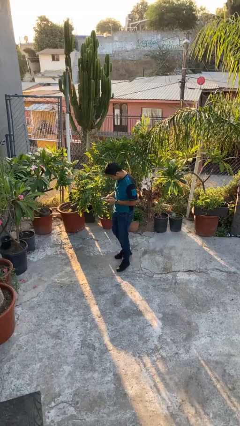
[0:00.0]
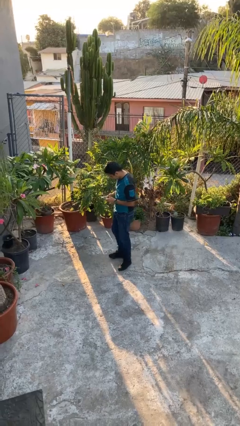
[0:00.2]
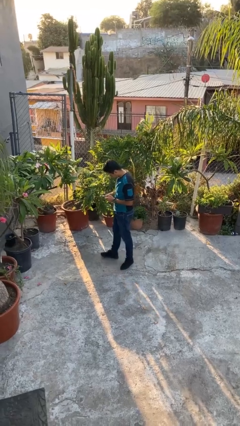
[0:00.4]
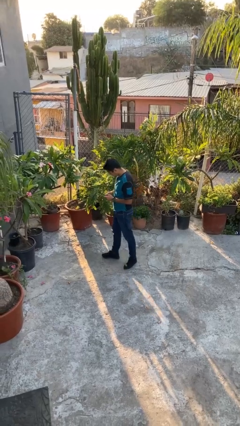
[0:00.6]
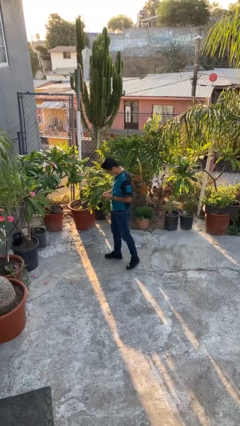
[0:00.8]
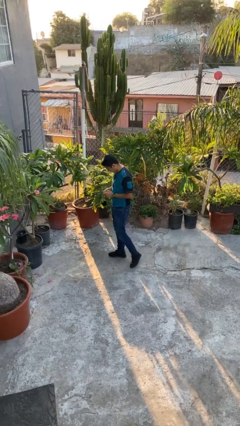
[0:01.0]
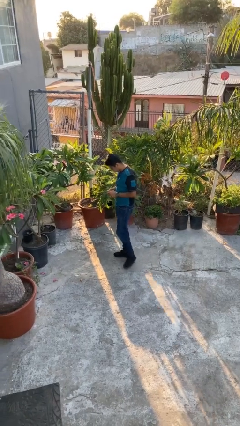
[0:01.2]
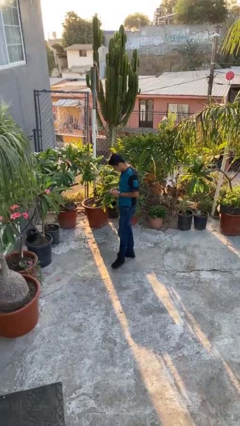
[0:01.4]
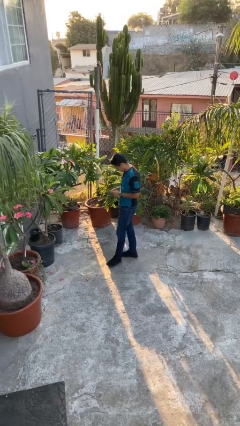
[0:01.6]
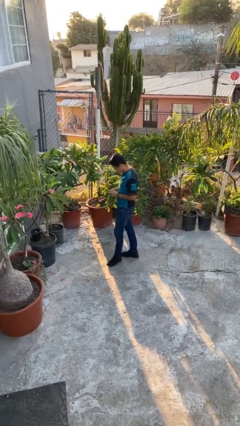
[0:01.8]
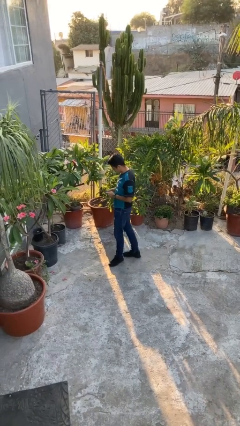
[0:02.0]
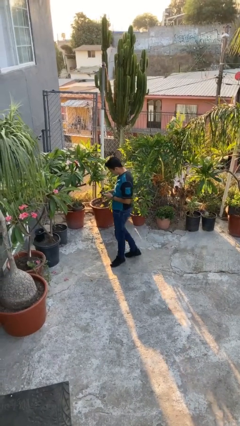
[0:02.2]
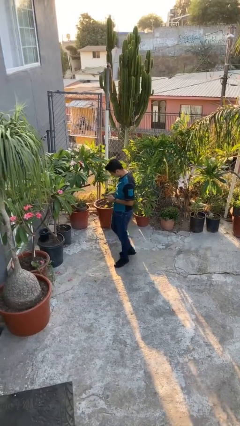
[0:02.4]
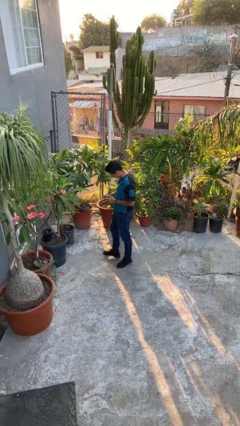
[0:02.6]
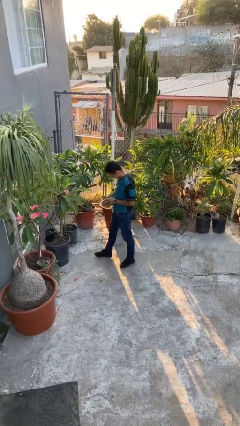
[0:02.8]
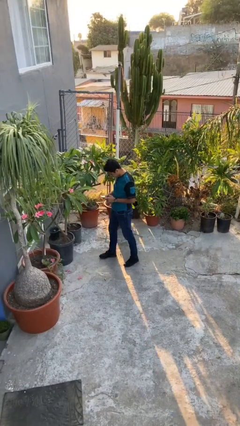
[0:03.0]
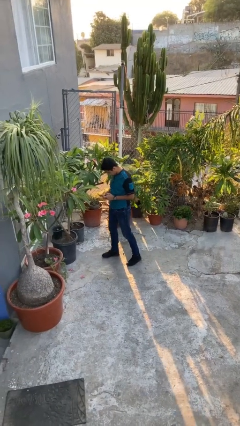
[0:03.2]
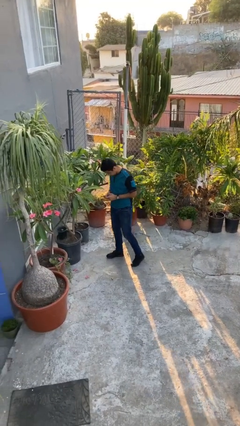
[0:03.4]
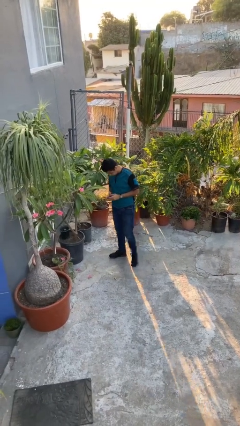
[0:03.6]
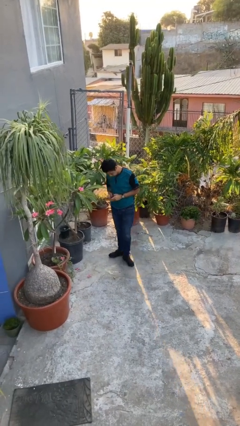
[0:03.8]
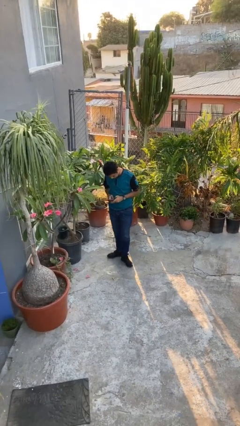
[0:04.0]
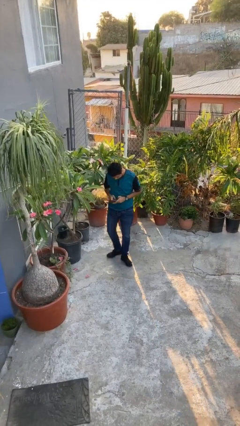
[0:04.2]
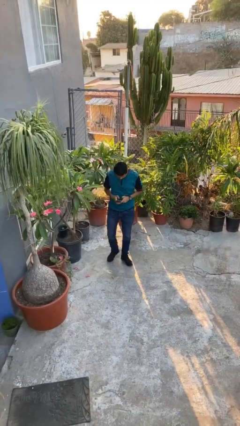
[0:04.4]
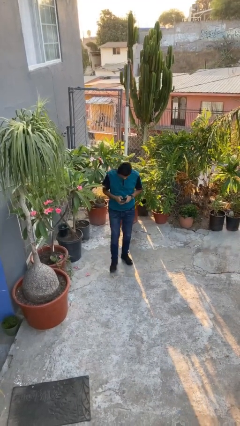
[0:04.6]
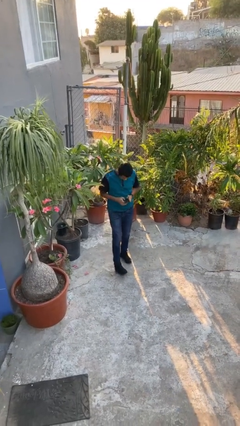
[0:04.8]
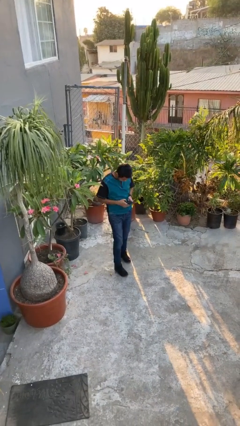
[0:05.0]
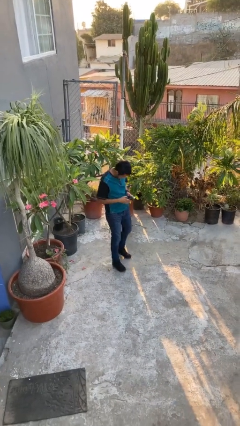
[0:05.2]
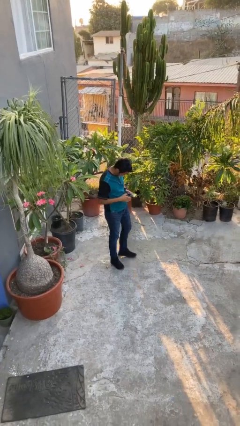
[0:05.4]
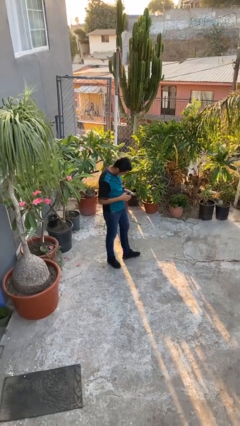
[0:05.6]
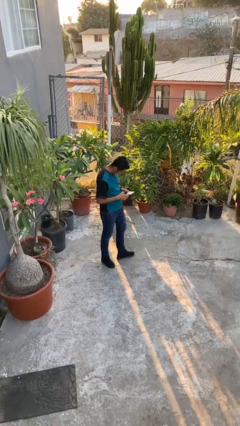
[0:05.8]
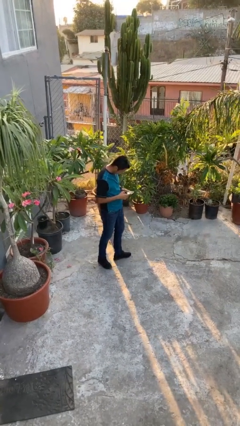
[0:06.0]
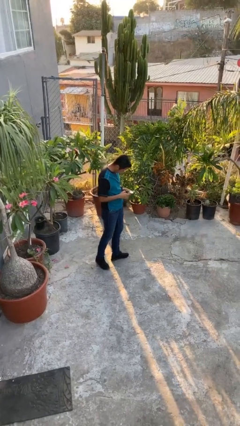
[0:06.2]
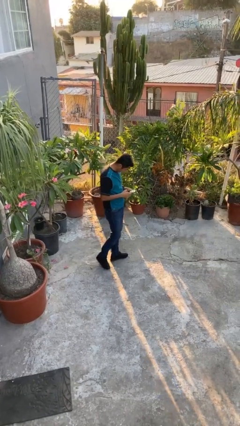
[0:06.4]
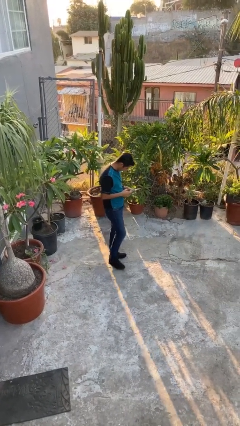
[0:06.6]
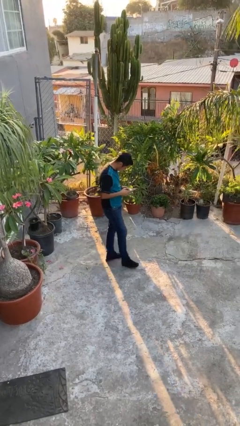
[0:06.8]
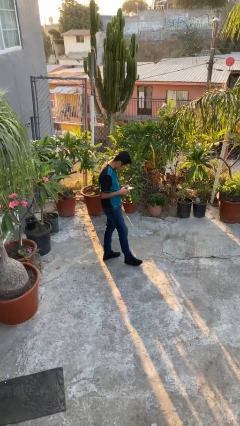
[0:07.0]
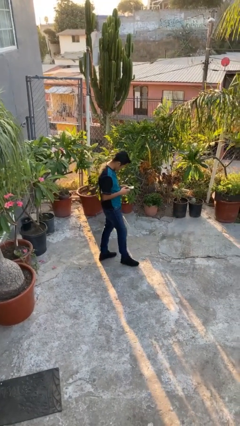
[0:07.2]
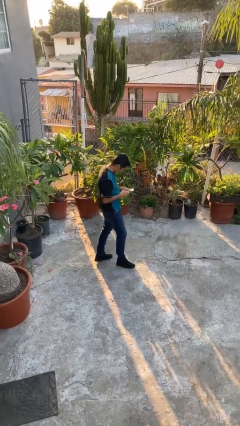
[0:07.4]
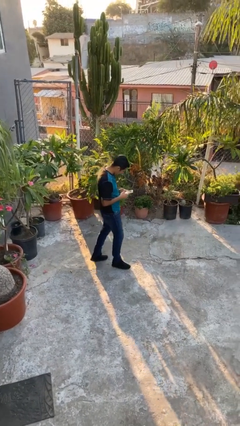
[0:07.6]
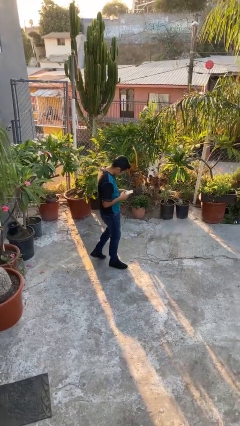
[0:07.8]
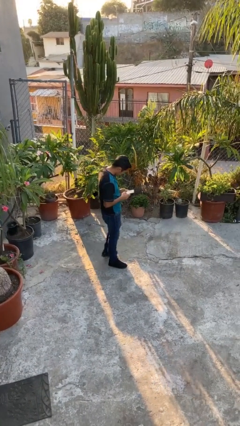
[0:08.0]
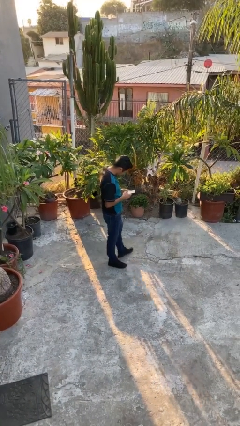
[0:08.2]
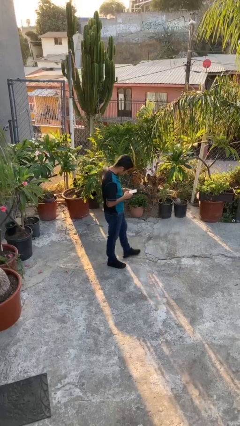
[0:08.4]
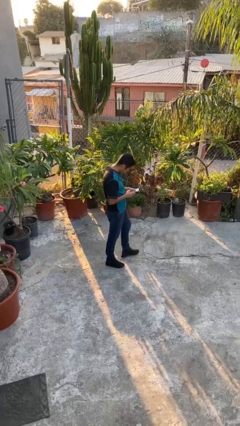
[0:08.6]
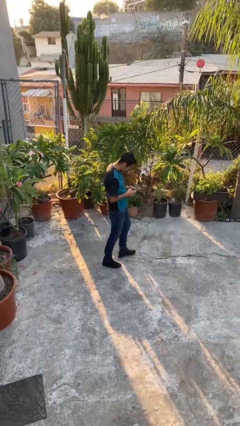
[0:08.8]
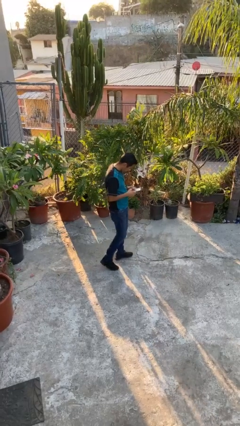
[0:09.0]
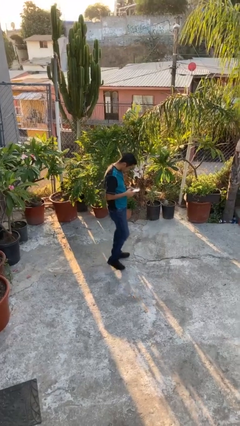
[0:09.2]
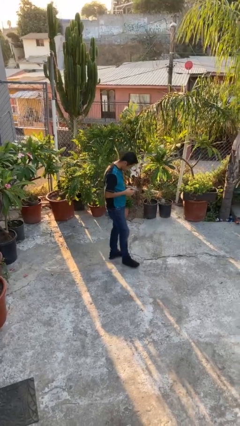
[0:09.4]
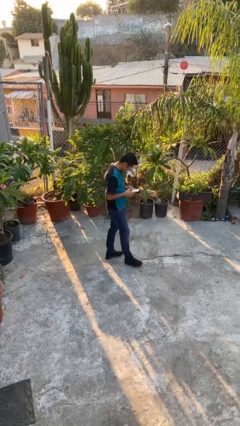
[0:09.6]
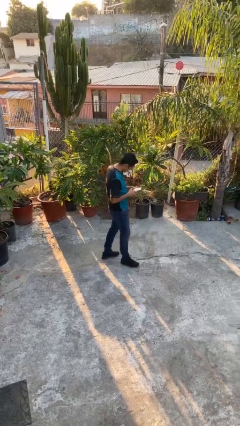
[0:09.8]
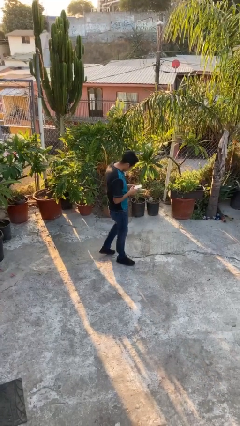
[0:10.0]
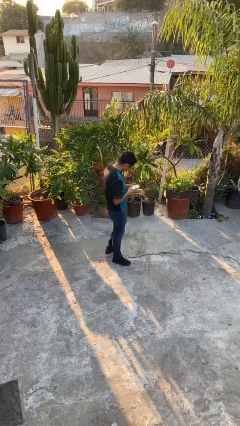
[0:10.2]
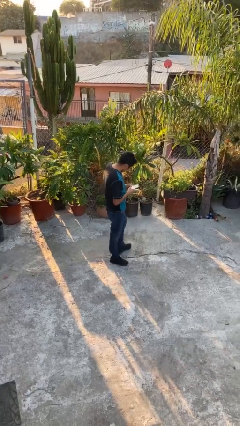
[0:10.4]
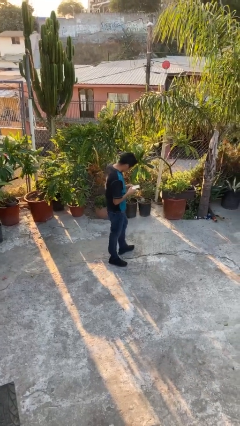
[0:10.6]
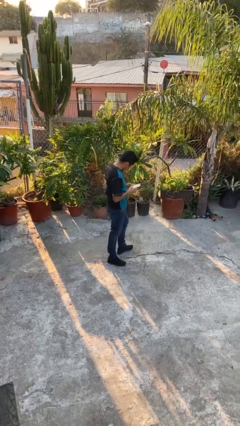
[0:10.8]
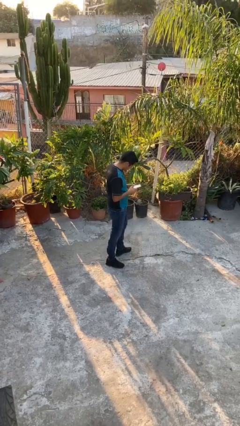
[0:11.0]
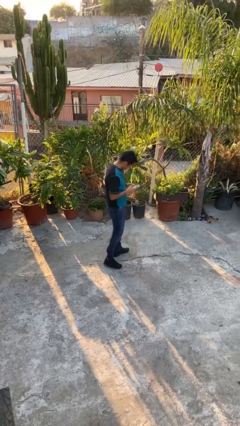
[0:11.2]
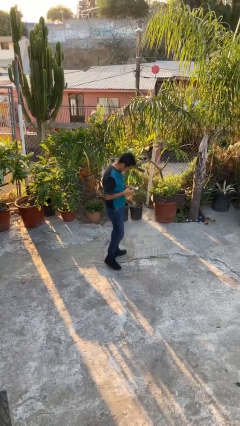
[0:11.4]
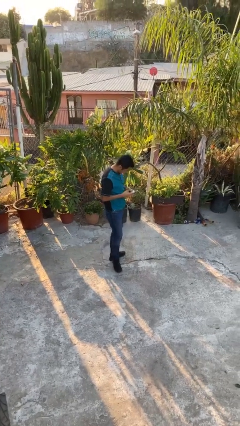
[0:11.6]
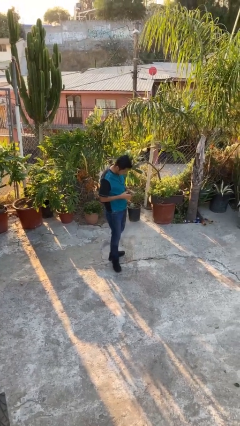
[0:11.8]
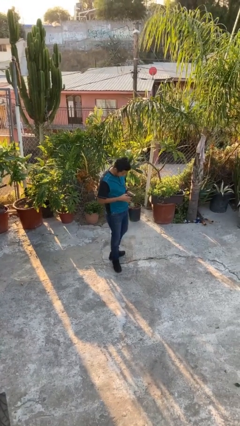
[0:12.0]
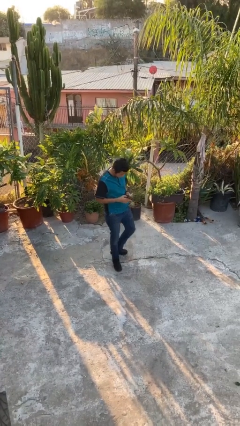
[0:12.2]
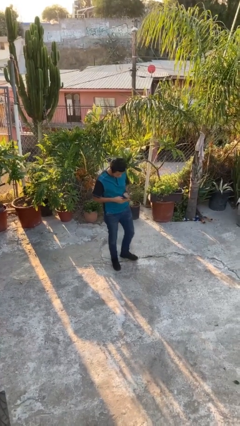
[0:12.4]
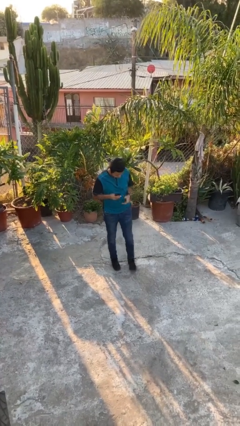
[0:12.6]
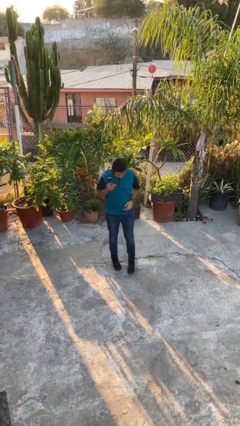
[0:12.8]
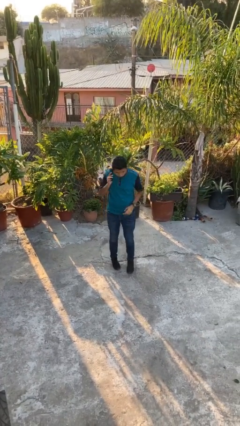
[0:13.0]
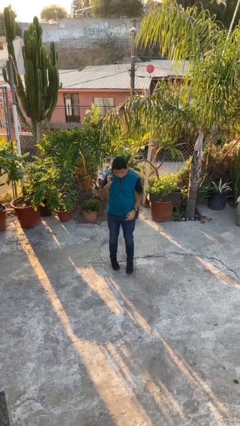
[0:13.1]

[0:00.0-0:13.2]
person texts on phone

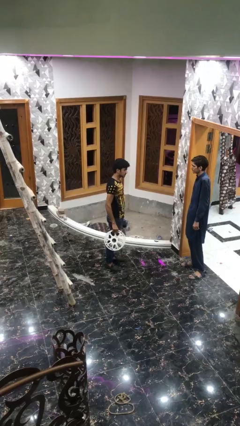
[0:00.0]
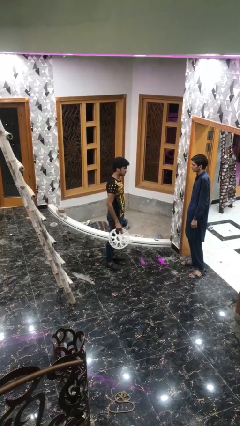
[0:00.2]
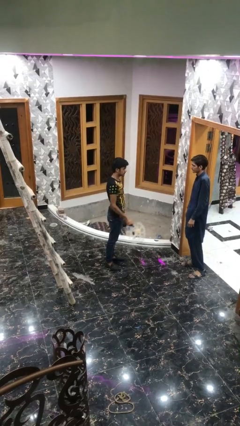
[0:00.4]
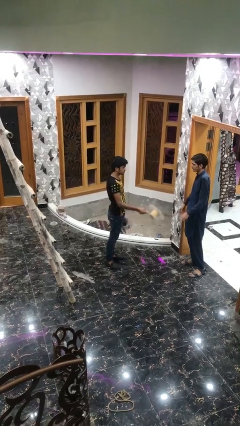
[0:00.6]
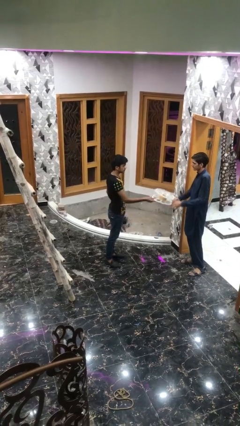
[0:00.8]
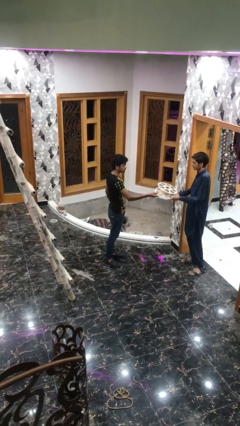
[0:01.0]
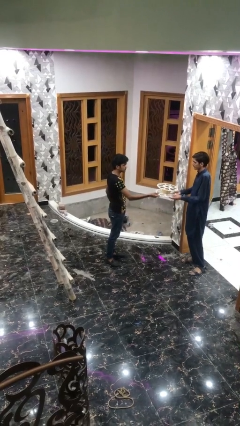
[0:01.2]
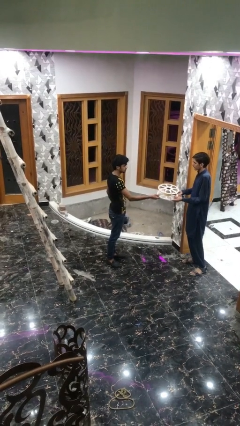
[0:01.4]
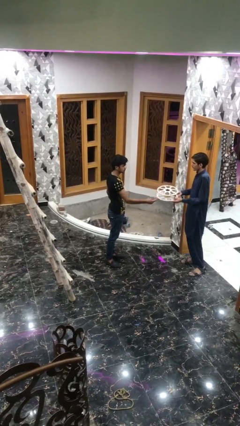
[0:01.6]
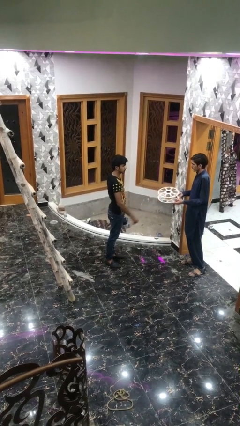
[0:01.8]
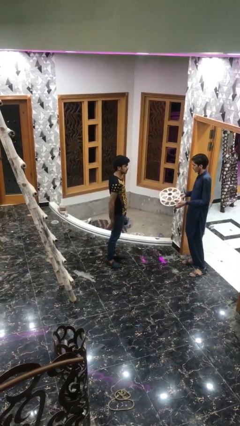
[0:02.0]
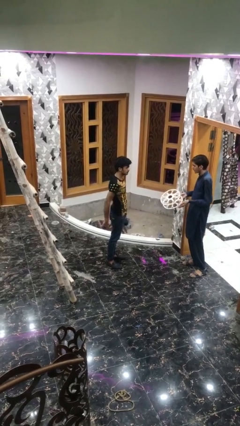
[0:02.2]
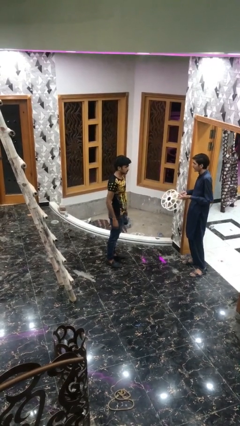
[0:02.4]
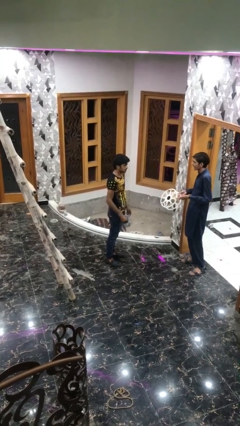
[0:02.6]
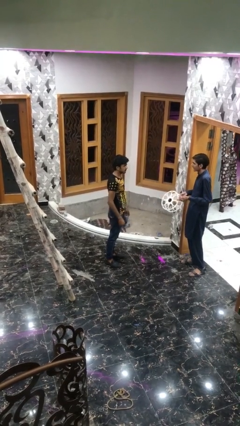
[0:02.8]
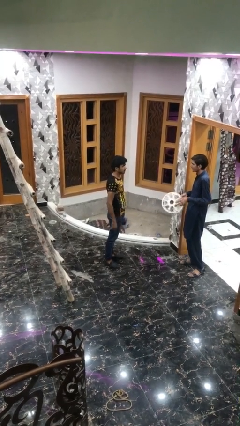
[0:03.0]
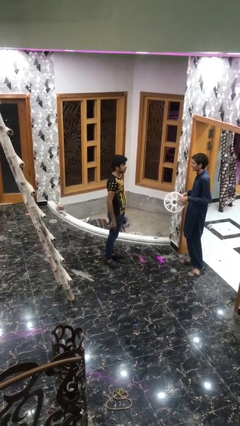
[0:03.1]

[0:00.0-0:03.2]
person transfers object to person

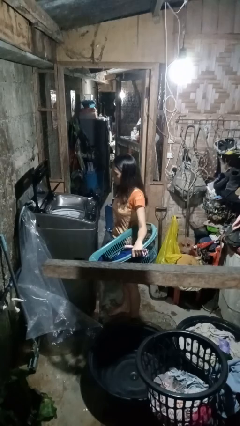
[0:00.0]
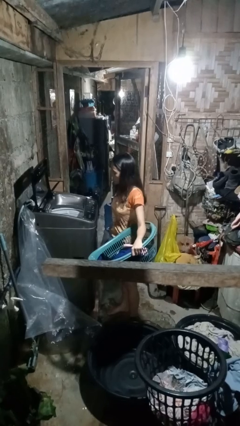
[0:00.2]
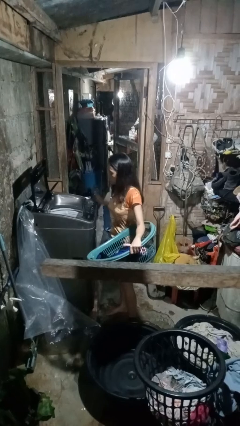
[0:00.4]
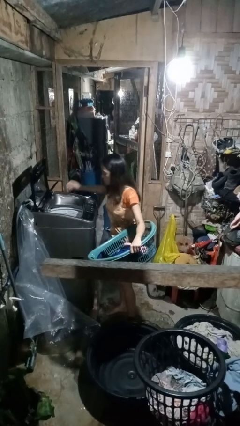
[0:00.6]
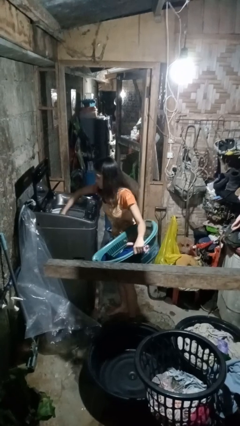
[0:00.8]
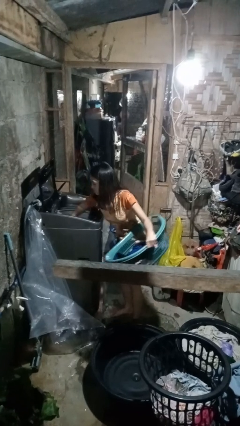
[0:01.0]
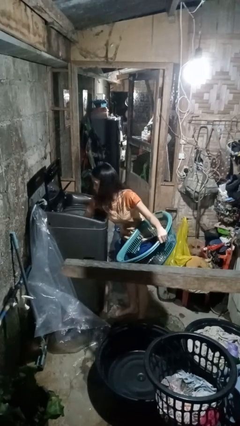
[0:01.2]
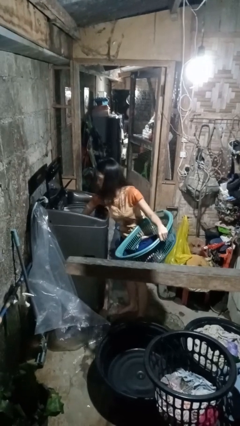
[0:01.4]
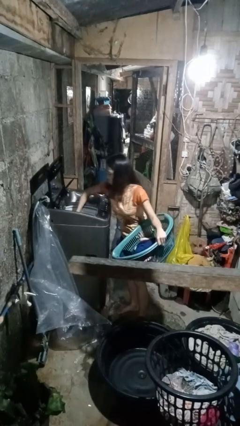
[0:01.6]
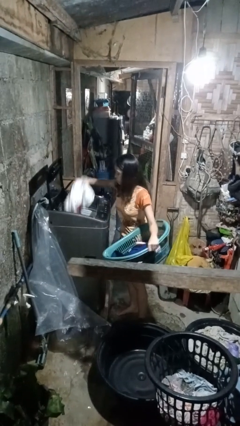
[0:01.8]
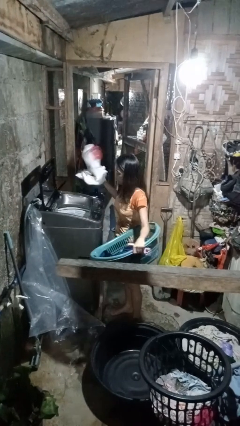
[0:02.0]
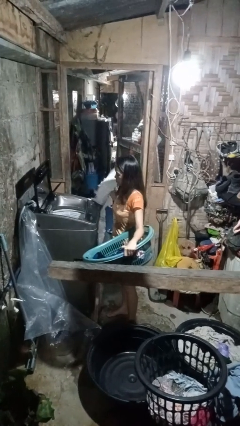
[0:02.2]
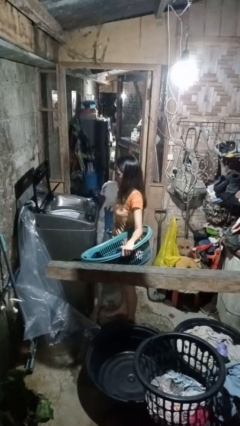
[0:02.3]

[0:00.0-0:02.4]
person loads clotheswasher
